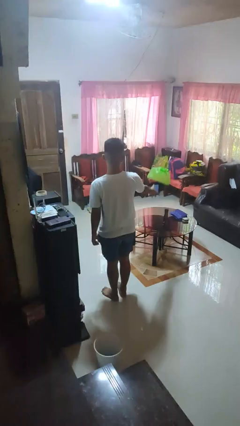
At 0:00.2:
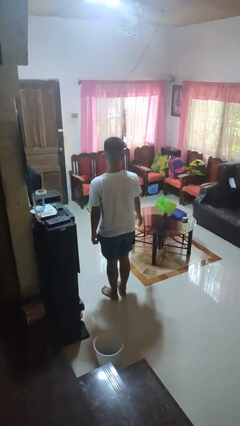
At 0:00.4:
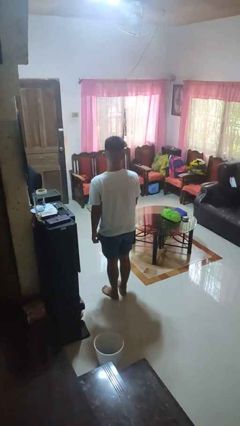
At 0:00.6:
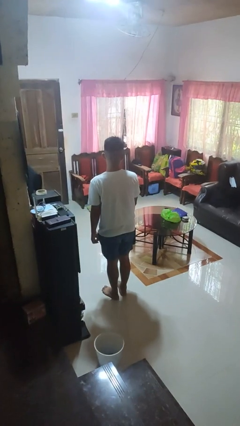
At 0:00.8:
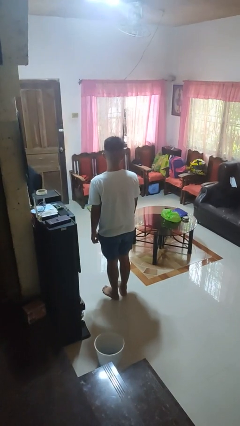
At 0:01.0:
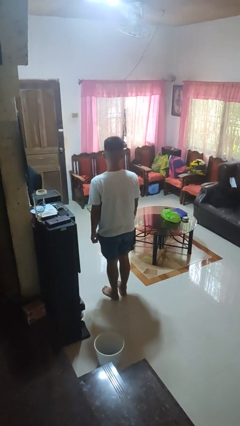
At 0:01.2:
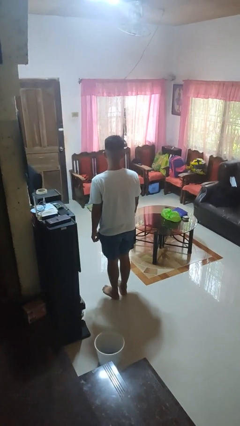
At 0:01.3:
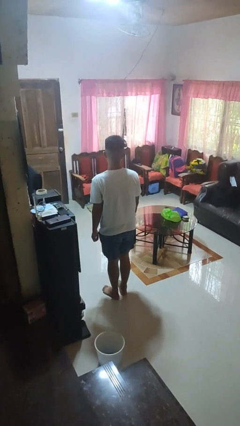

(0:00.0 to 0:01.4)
person throws object on table

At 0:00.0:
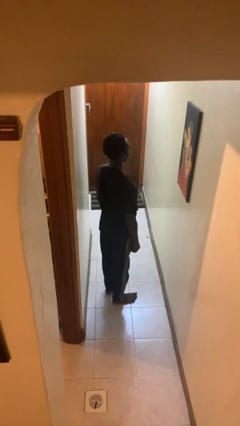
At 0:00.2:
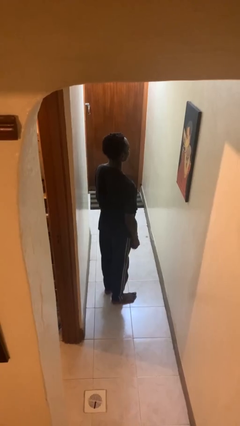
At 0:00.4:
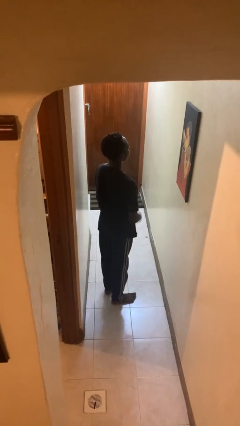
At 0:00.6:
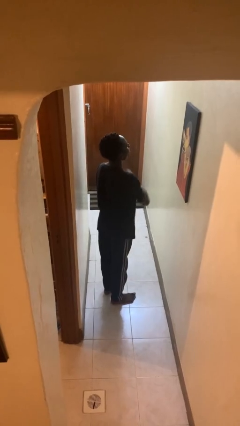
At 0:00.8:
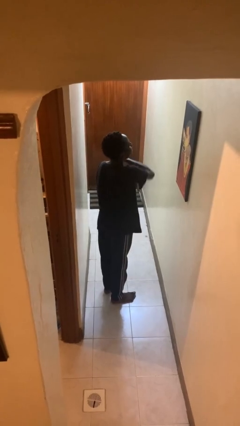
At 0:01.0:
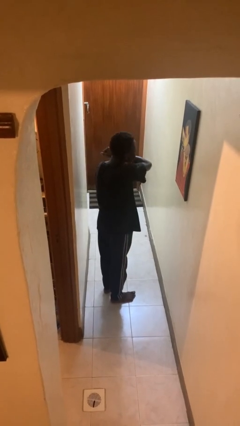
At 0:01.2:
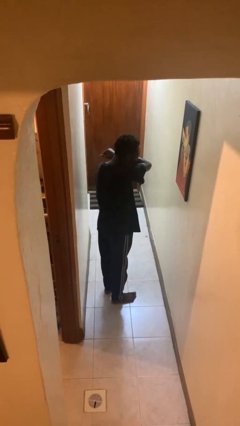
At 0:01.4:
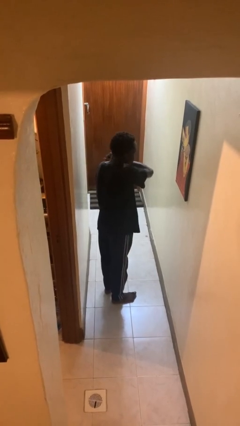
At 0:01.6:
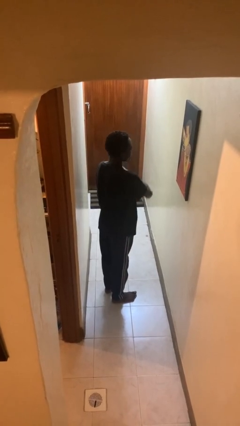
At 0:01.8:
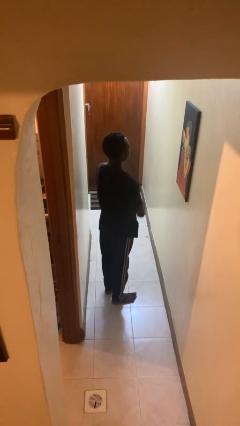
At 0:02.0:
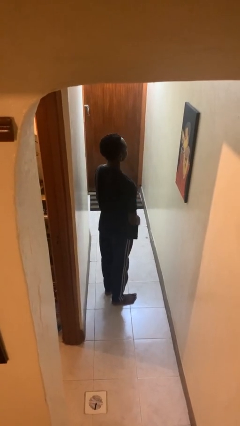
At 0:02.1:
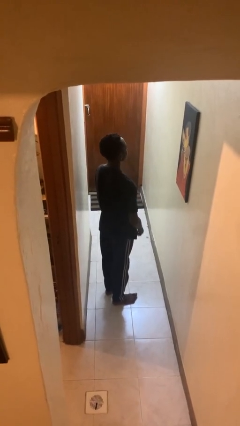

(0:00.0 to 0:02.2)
person sneezes into arm

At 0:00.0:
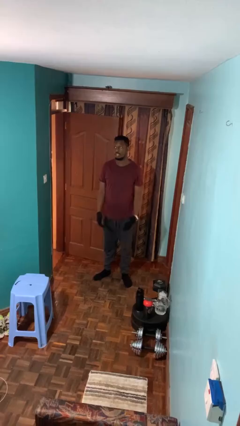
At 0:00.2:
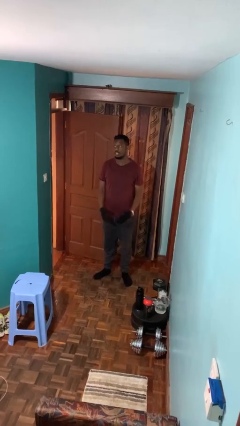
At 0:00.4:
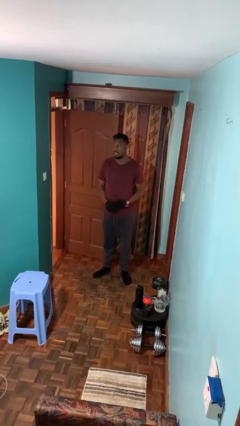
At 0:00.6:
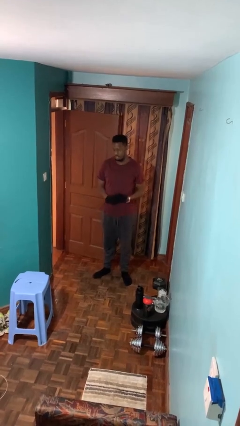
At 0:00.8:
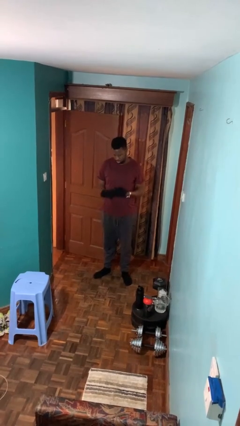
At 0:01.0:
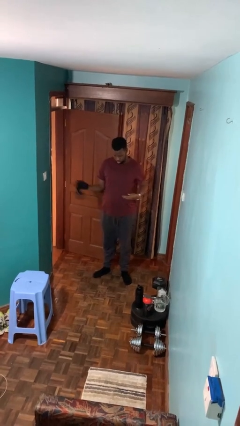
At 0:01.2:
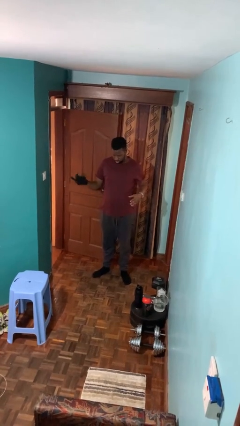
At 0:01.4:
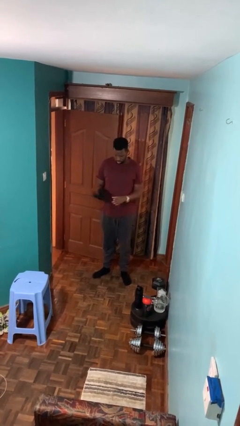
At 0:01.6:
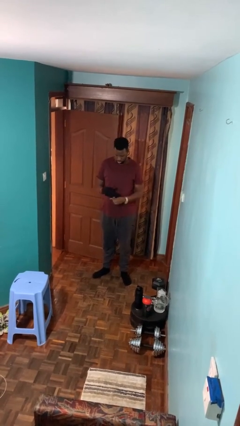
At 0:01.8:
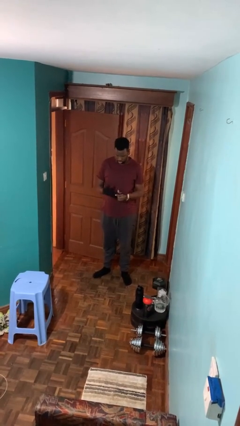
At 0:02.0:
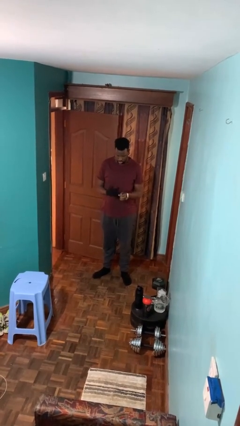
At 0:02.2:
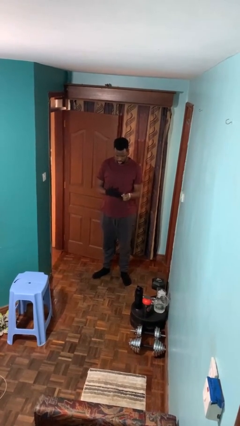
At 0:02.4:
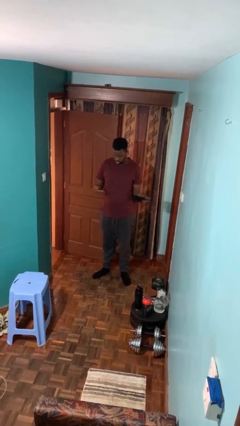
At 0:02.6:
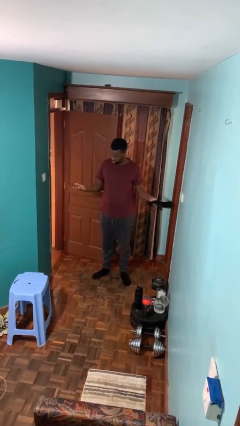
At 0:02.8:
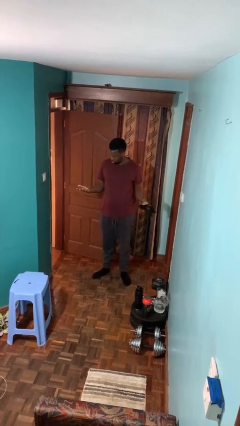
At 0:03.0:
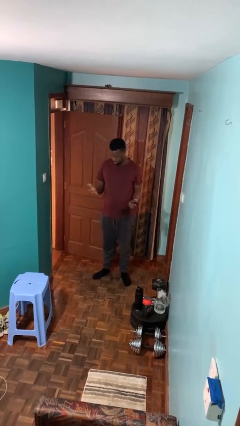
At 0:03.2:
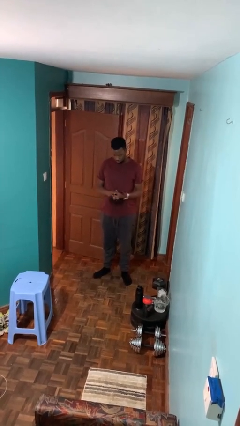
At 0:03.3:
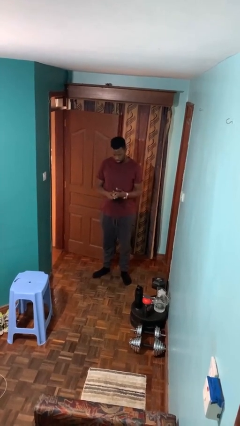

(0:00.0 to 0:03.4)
person takes off gloves

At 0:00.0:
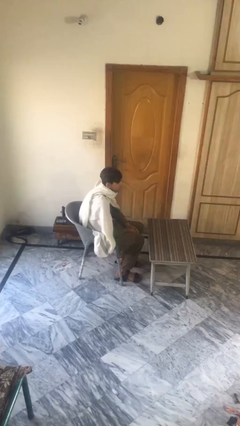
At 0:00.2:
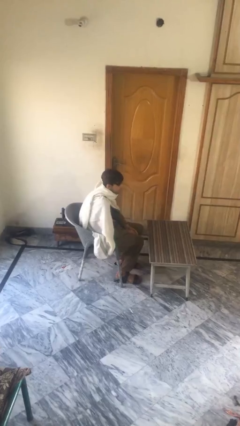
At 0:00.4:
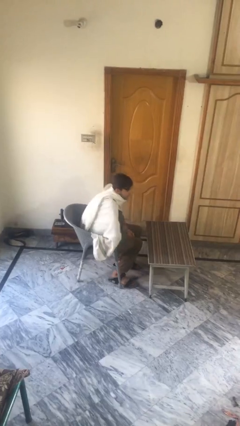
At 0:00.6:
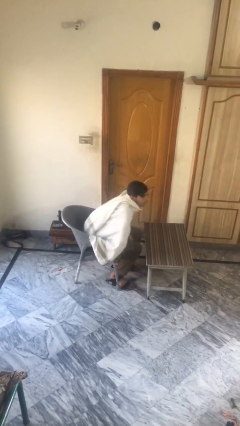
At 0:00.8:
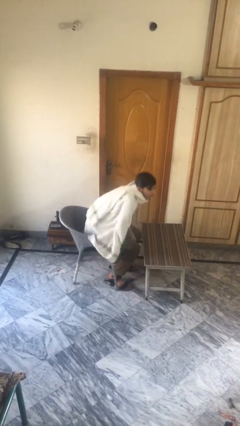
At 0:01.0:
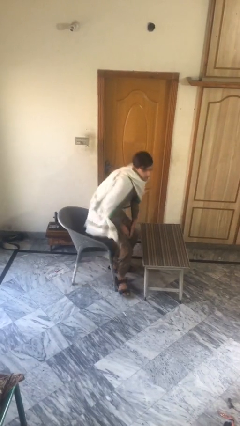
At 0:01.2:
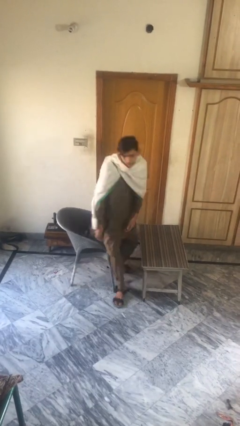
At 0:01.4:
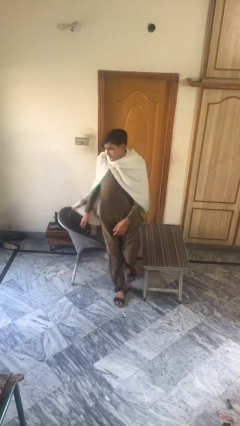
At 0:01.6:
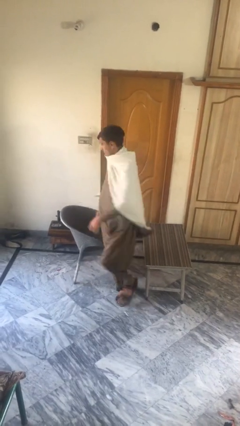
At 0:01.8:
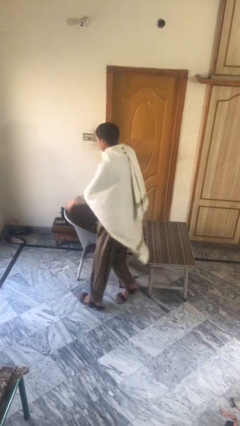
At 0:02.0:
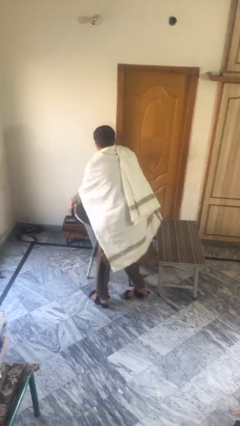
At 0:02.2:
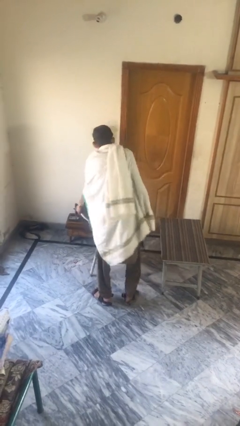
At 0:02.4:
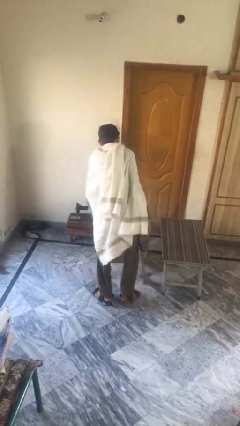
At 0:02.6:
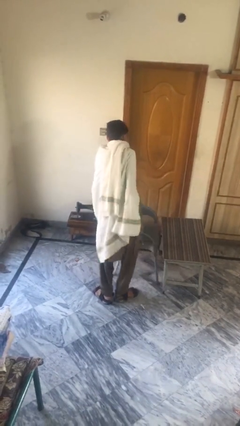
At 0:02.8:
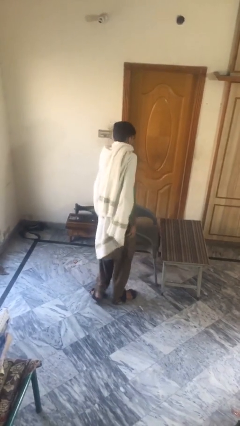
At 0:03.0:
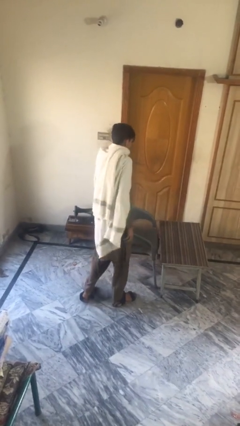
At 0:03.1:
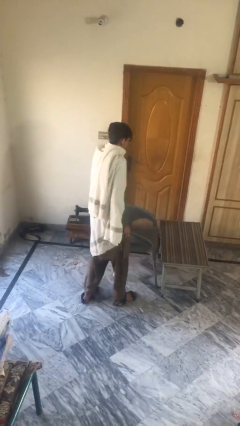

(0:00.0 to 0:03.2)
person stands up

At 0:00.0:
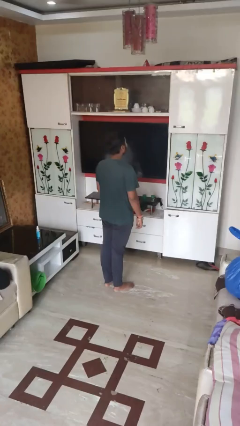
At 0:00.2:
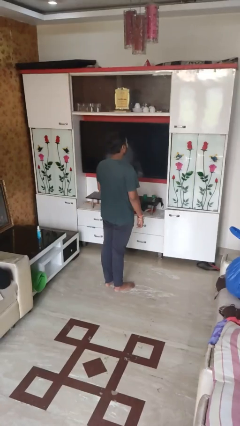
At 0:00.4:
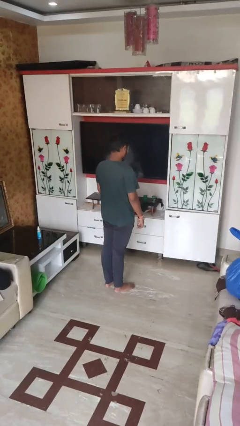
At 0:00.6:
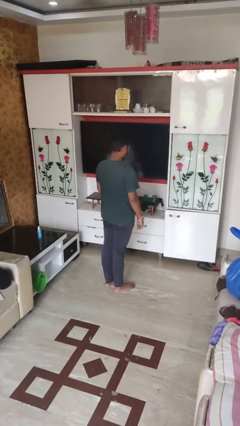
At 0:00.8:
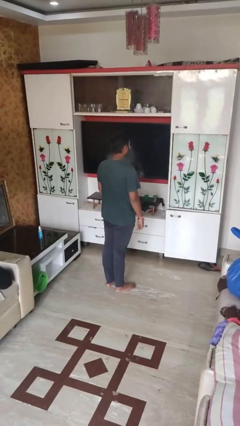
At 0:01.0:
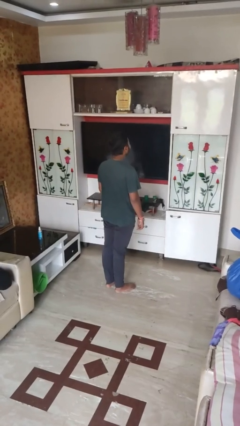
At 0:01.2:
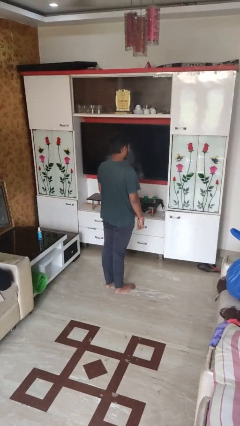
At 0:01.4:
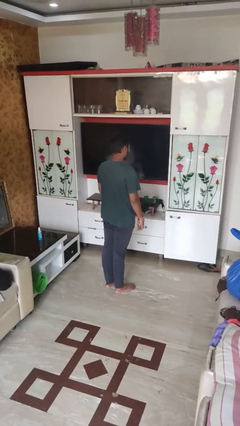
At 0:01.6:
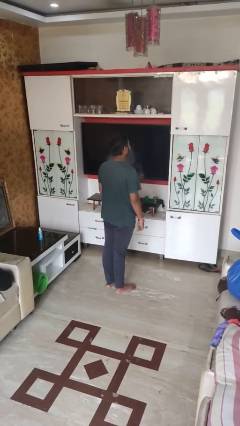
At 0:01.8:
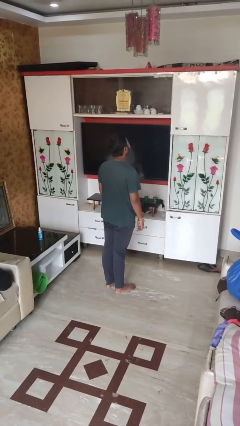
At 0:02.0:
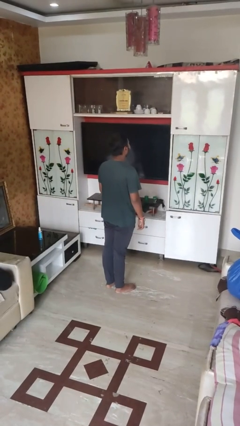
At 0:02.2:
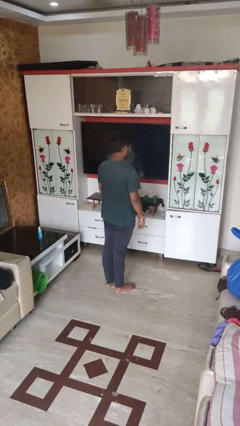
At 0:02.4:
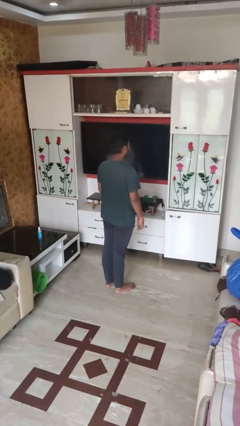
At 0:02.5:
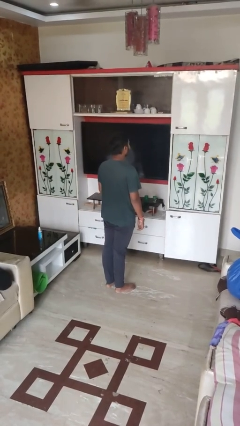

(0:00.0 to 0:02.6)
person nods head

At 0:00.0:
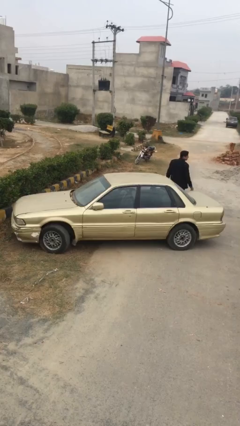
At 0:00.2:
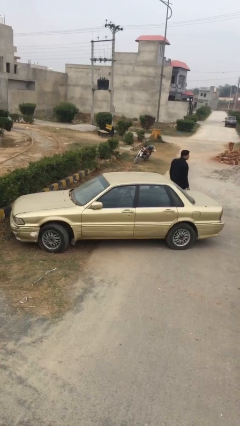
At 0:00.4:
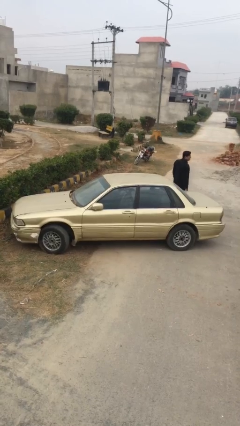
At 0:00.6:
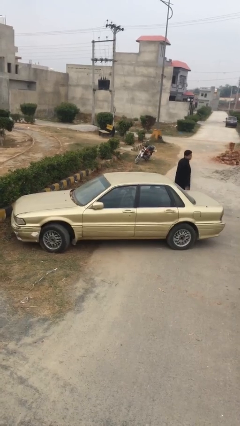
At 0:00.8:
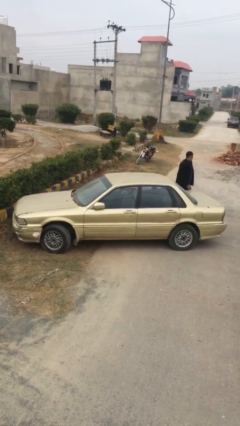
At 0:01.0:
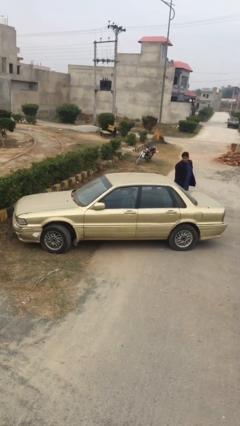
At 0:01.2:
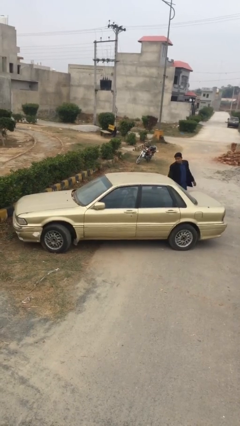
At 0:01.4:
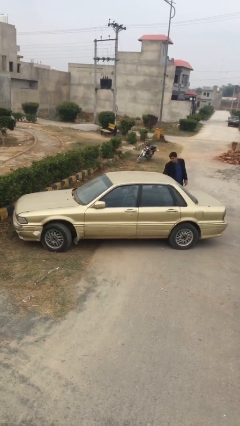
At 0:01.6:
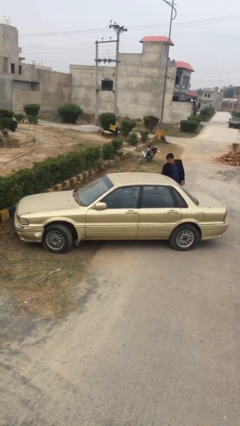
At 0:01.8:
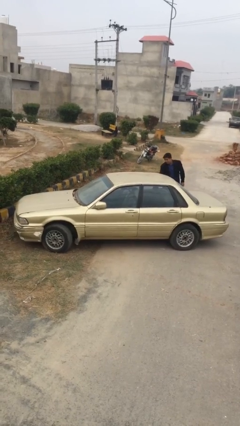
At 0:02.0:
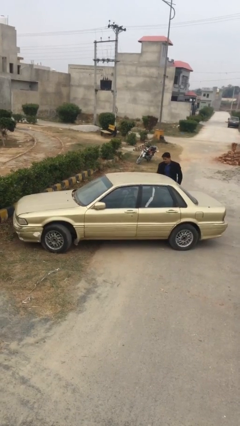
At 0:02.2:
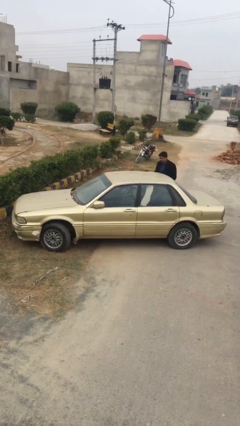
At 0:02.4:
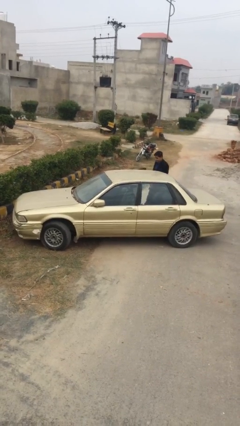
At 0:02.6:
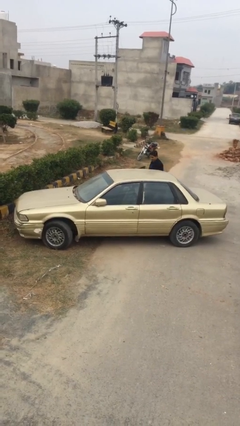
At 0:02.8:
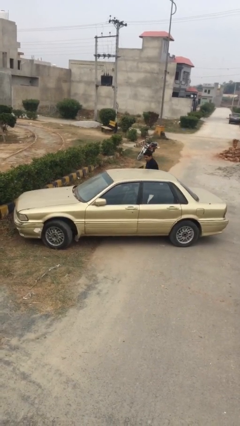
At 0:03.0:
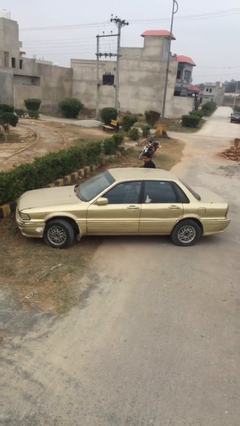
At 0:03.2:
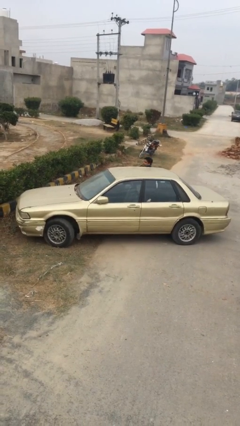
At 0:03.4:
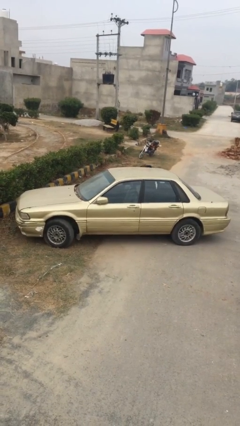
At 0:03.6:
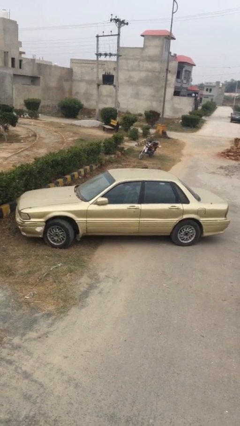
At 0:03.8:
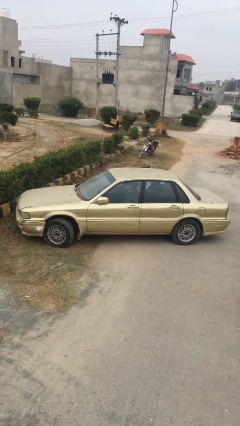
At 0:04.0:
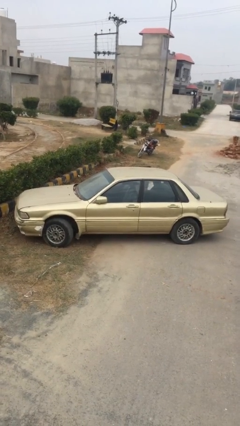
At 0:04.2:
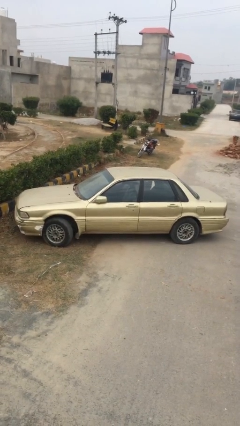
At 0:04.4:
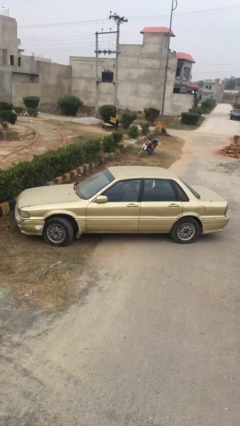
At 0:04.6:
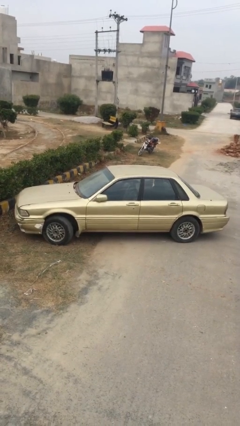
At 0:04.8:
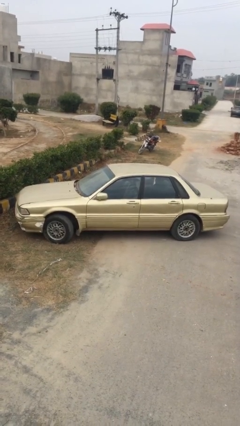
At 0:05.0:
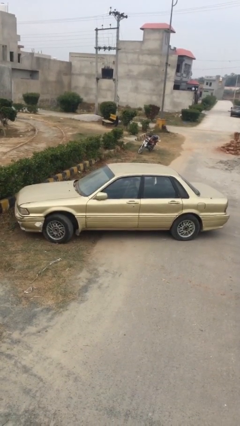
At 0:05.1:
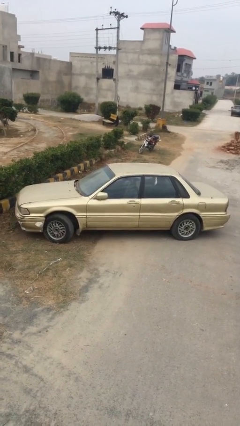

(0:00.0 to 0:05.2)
car picks up person
